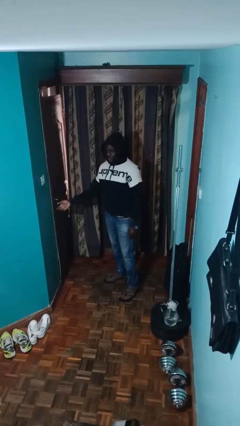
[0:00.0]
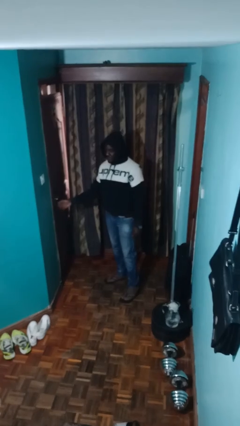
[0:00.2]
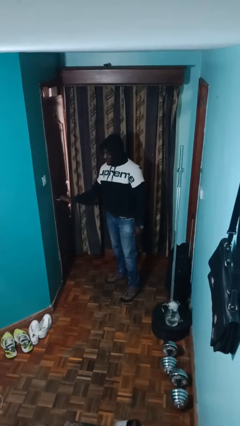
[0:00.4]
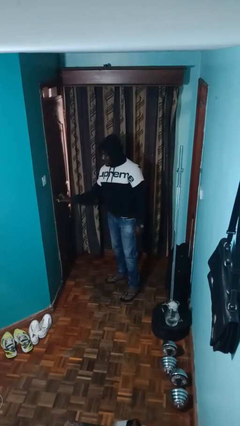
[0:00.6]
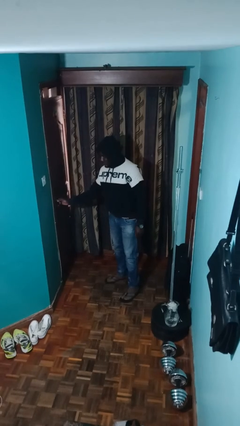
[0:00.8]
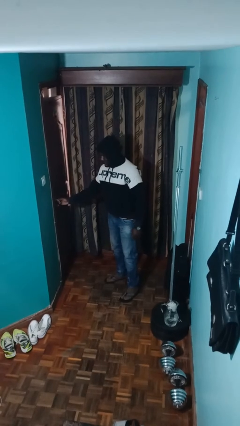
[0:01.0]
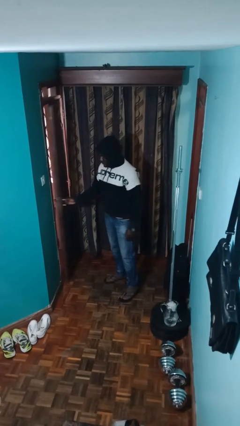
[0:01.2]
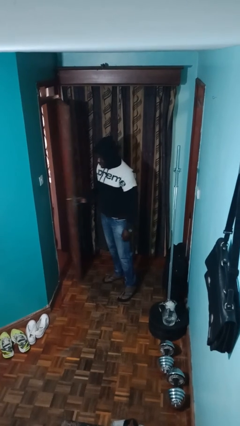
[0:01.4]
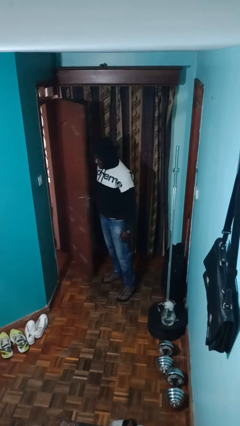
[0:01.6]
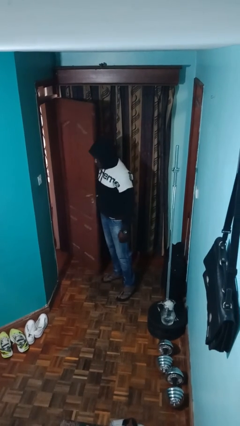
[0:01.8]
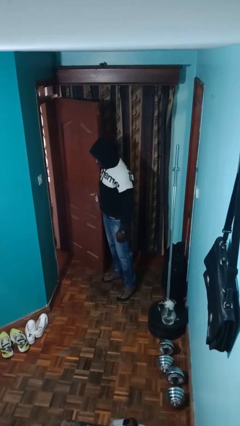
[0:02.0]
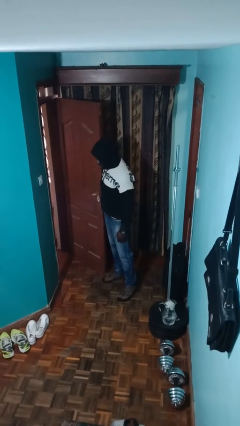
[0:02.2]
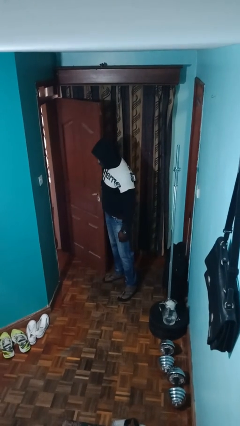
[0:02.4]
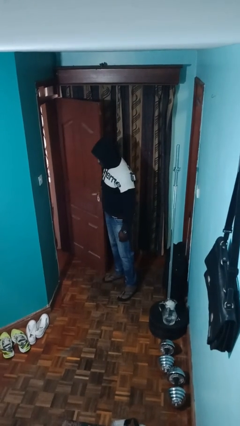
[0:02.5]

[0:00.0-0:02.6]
person opens facility door

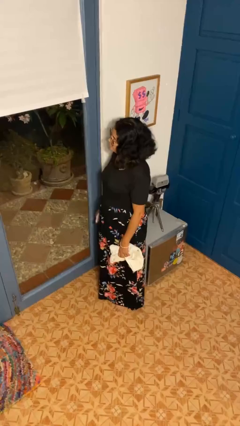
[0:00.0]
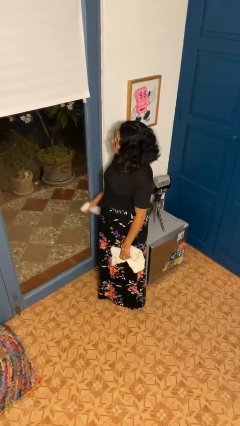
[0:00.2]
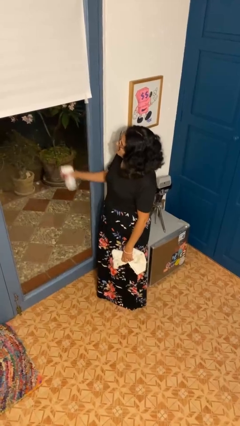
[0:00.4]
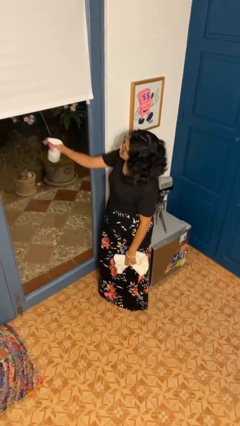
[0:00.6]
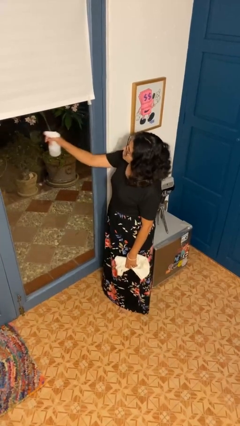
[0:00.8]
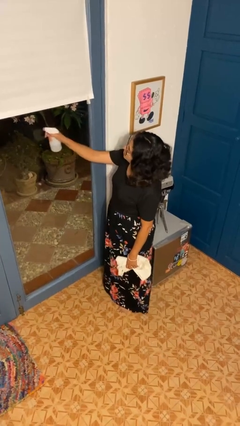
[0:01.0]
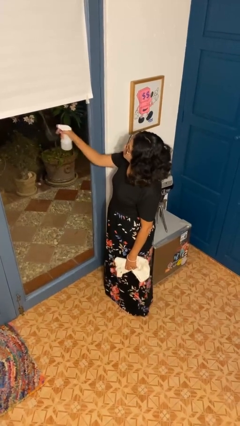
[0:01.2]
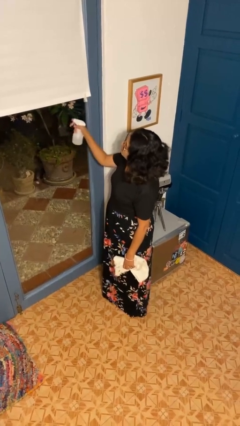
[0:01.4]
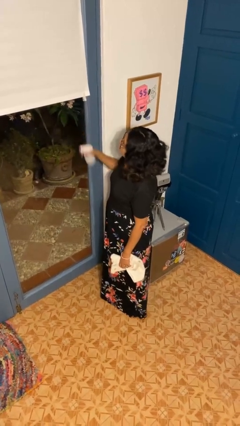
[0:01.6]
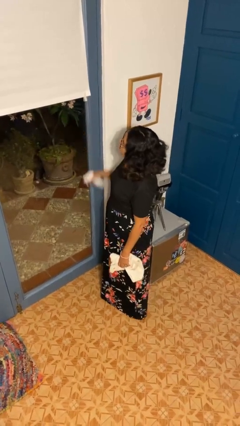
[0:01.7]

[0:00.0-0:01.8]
person sprays from bottle

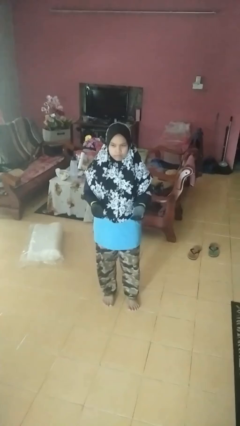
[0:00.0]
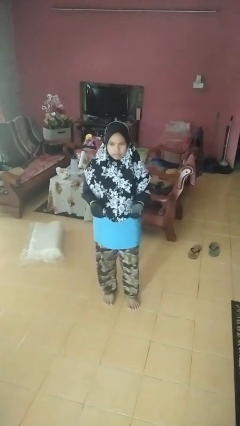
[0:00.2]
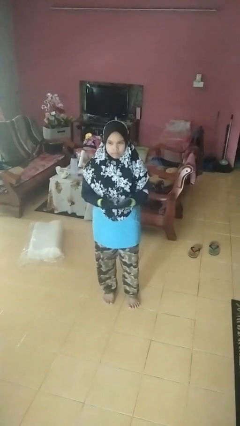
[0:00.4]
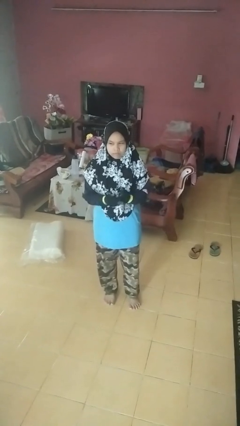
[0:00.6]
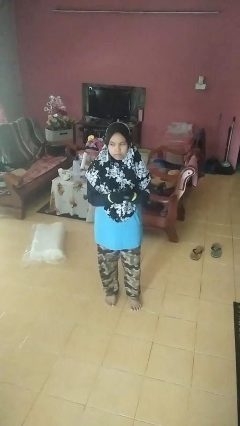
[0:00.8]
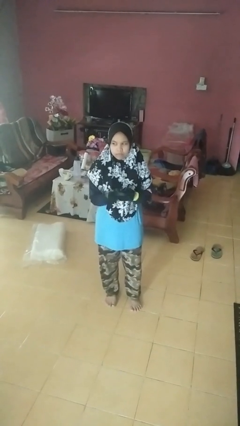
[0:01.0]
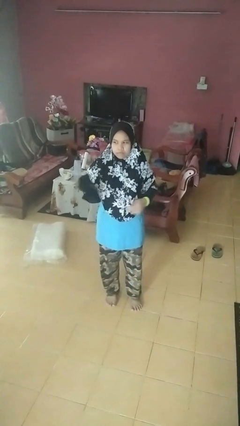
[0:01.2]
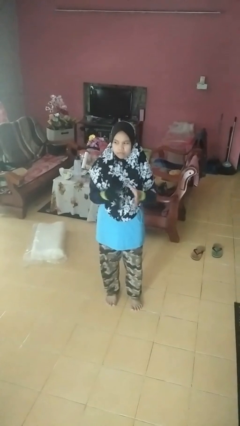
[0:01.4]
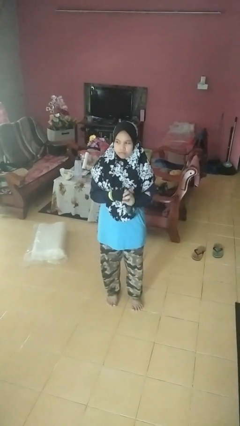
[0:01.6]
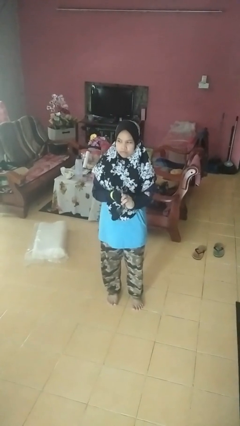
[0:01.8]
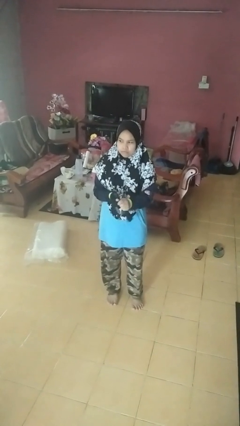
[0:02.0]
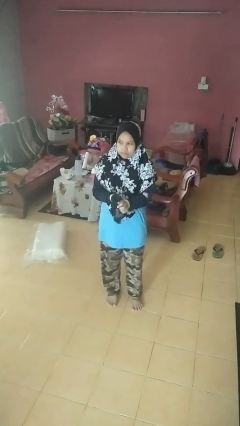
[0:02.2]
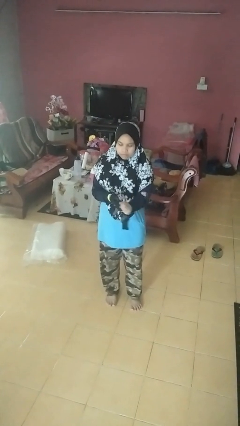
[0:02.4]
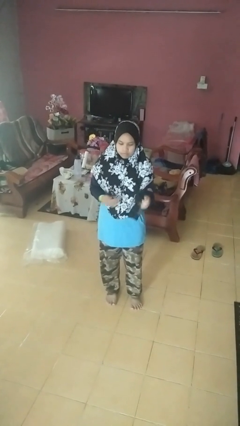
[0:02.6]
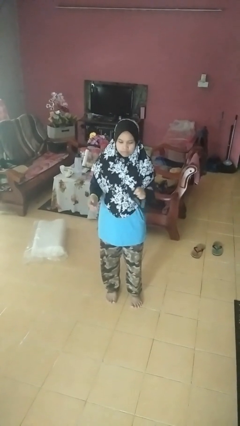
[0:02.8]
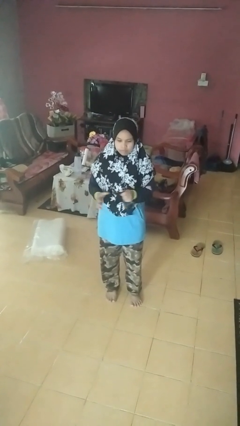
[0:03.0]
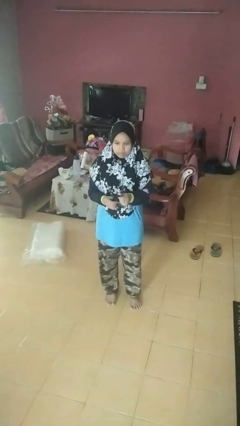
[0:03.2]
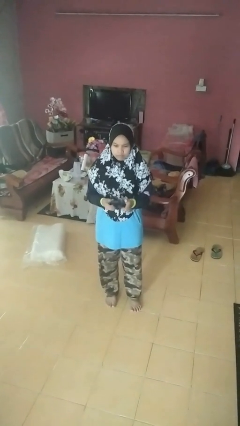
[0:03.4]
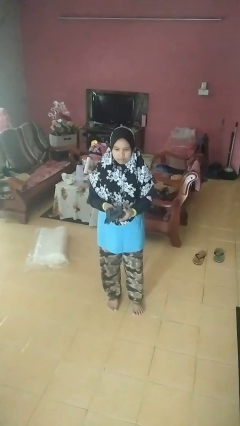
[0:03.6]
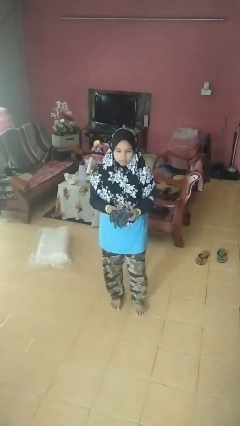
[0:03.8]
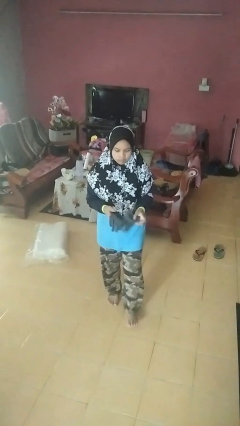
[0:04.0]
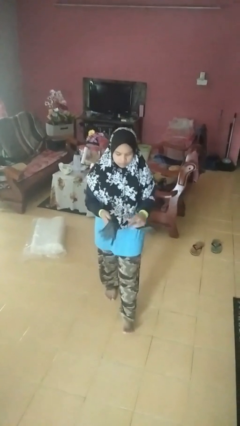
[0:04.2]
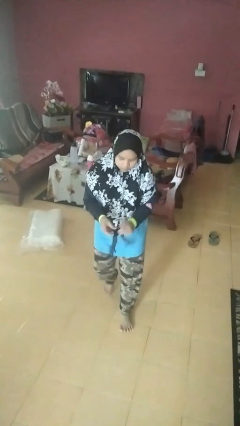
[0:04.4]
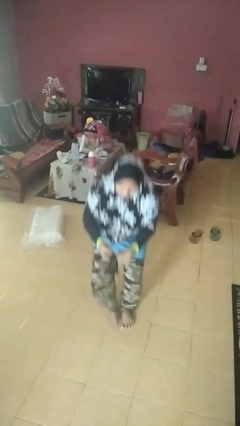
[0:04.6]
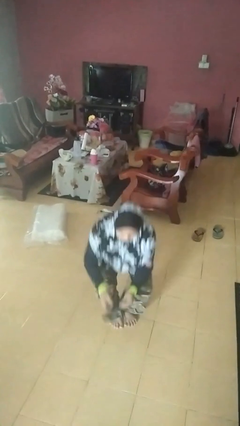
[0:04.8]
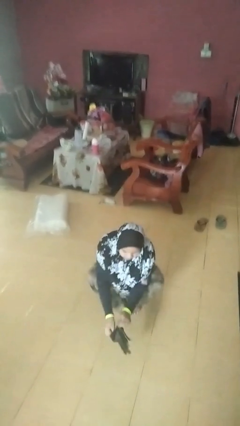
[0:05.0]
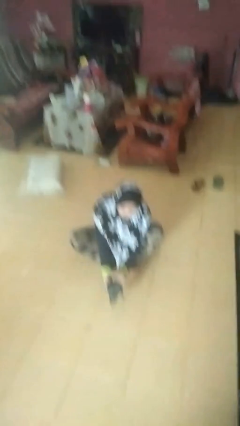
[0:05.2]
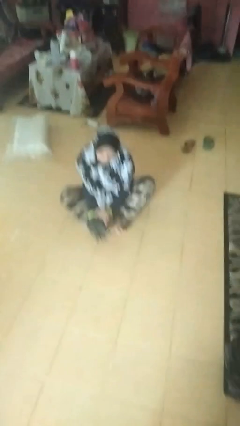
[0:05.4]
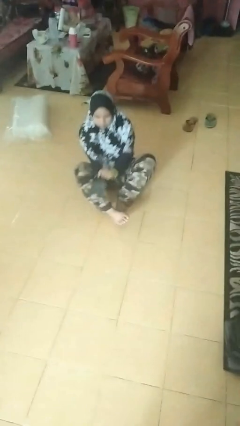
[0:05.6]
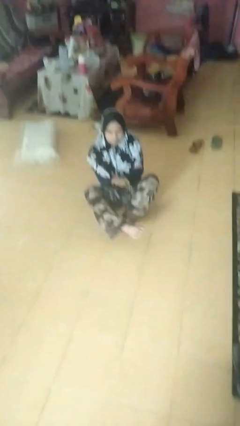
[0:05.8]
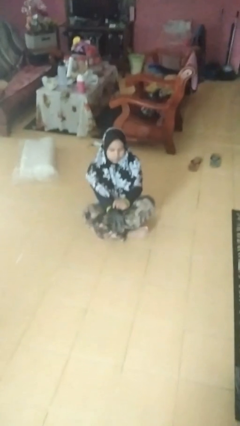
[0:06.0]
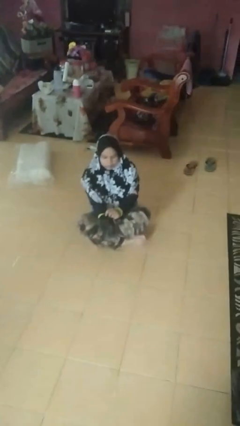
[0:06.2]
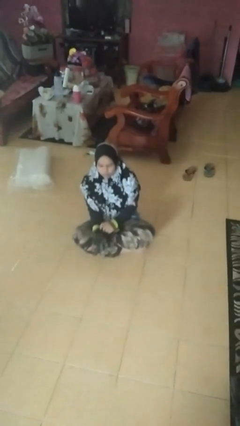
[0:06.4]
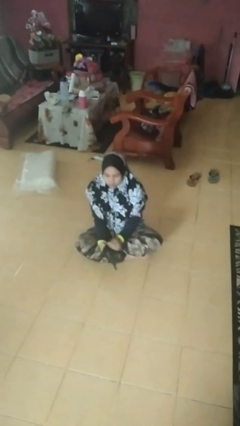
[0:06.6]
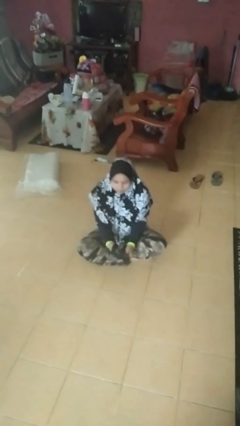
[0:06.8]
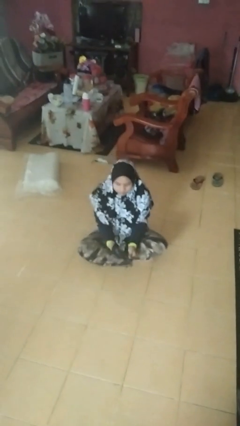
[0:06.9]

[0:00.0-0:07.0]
person takes off gloves

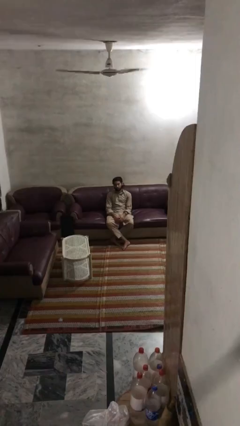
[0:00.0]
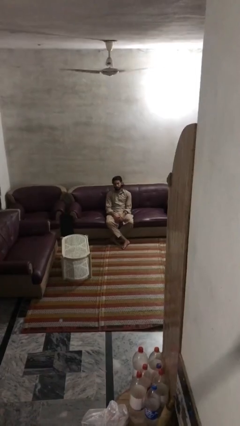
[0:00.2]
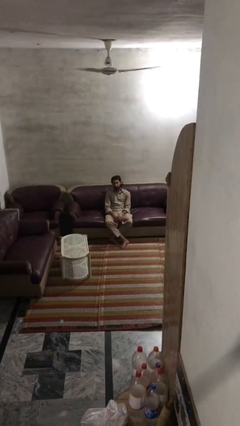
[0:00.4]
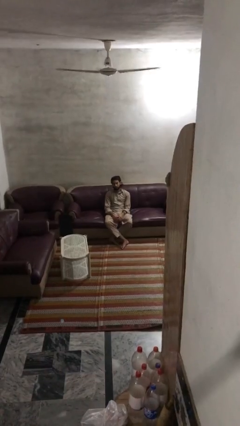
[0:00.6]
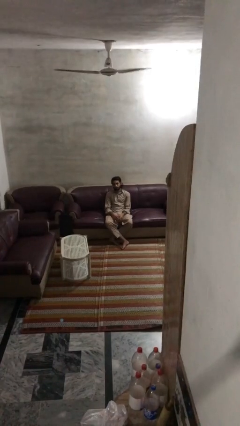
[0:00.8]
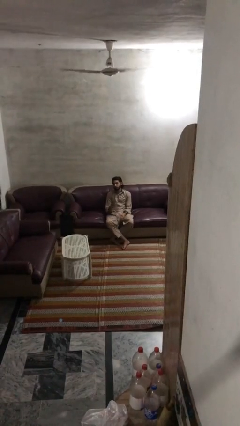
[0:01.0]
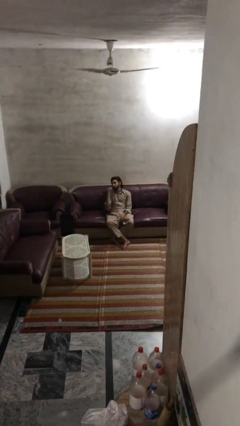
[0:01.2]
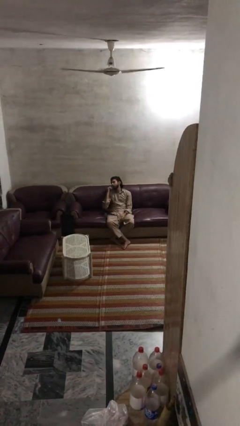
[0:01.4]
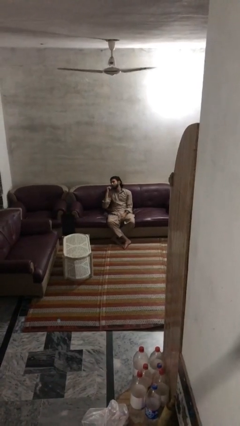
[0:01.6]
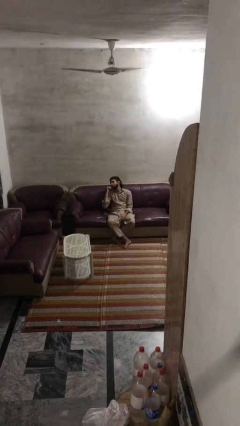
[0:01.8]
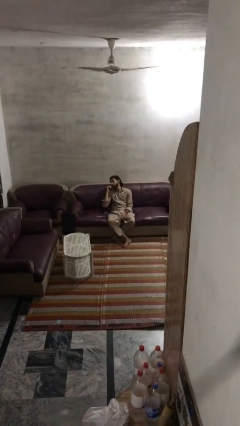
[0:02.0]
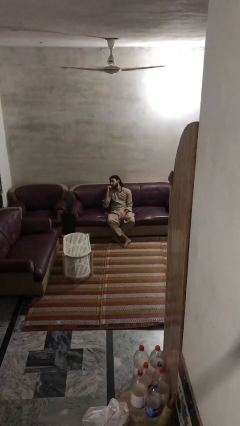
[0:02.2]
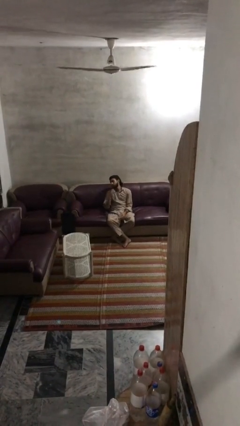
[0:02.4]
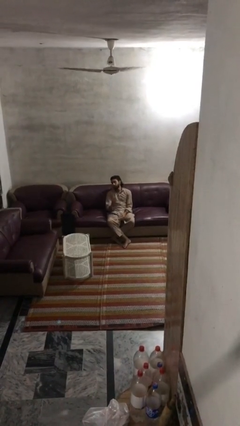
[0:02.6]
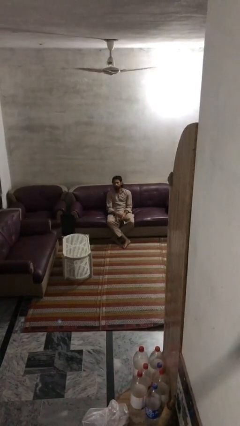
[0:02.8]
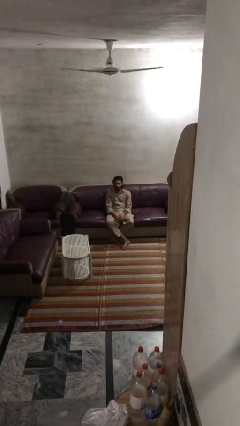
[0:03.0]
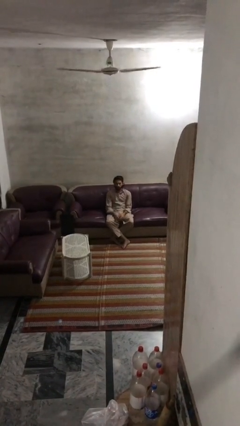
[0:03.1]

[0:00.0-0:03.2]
person gestures behind me

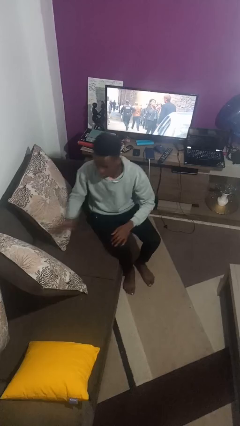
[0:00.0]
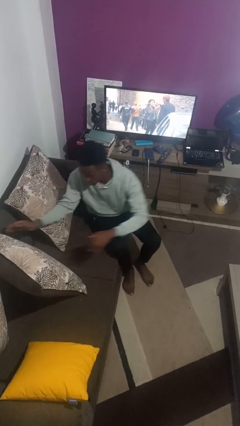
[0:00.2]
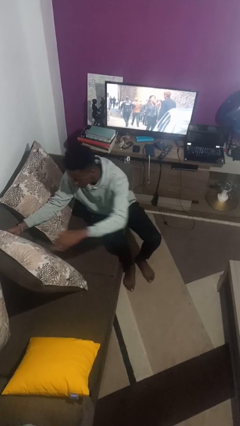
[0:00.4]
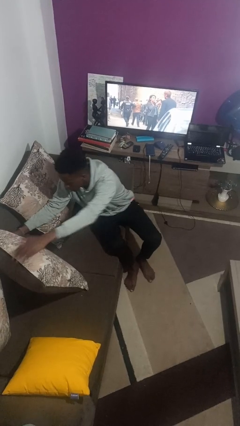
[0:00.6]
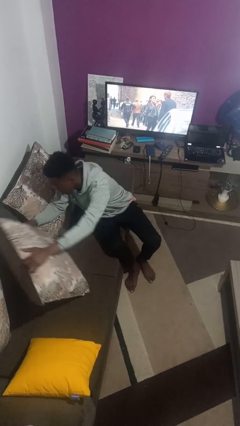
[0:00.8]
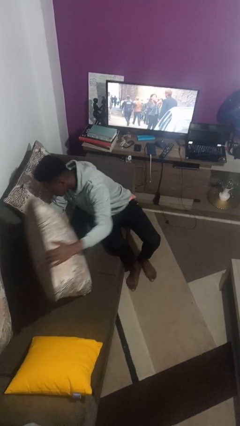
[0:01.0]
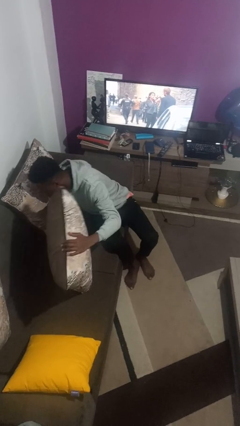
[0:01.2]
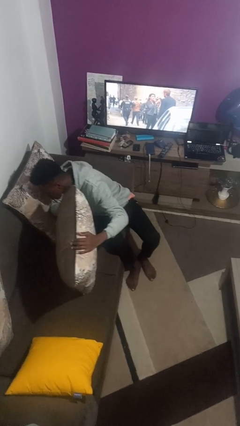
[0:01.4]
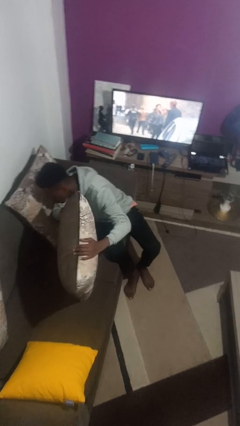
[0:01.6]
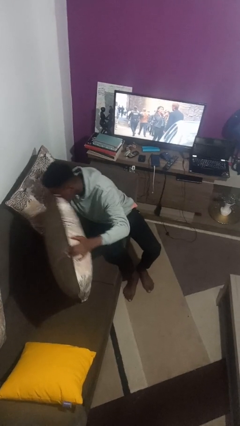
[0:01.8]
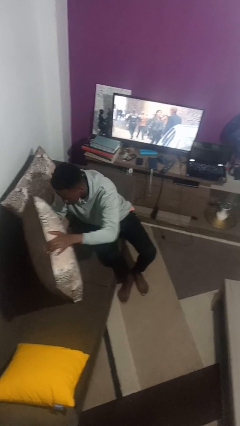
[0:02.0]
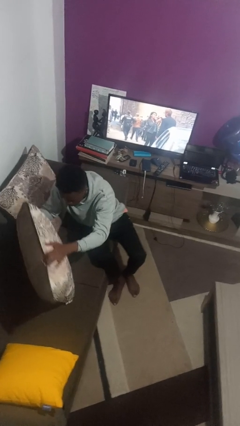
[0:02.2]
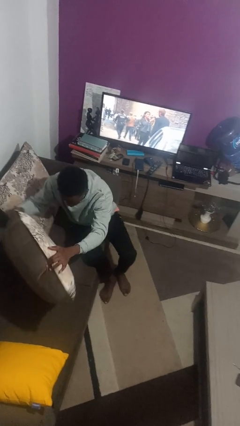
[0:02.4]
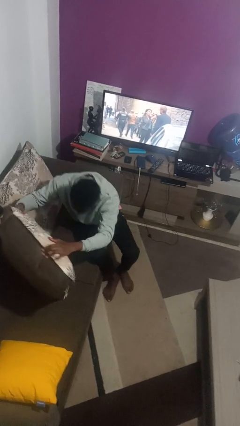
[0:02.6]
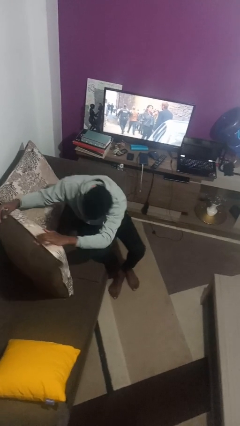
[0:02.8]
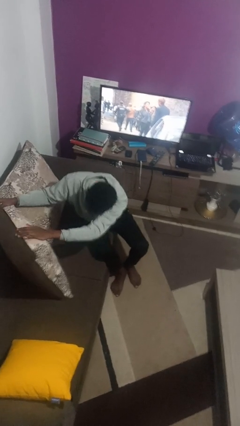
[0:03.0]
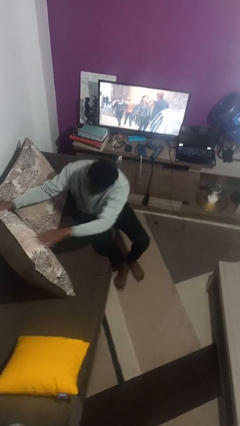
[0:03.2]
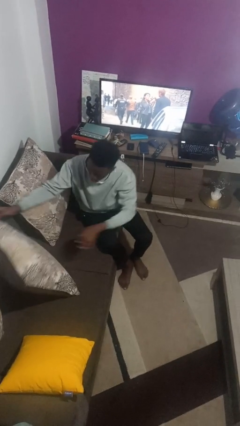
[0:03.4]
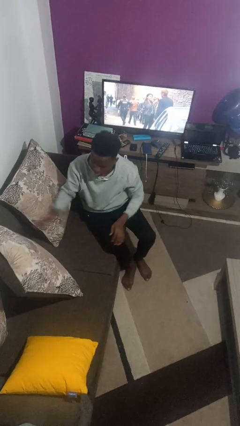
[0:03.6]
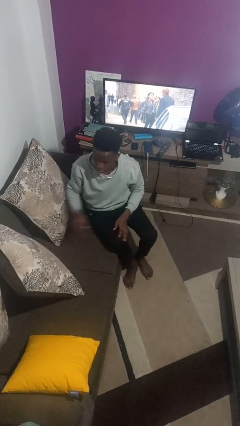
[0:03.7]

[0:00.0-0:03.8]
person searches in couch
